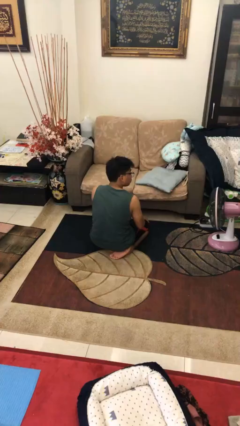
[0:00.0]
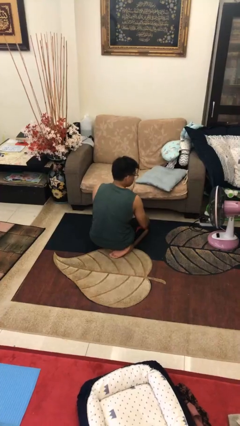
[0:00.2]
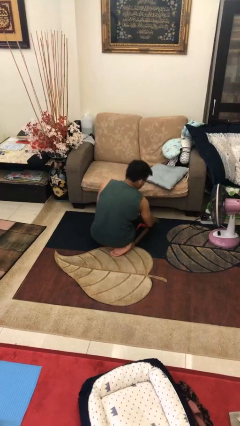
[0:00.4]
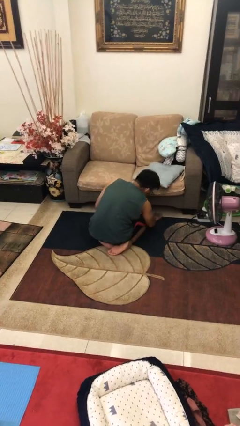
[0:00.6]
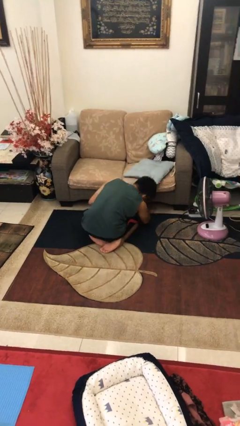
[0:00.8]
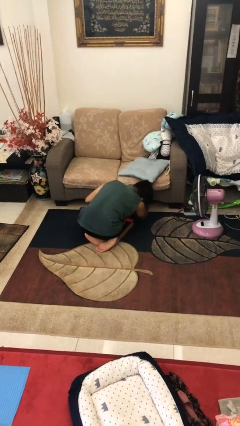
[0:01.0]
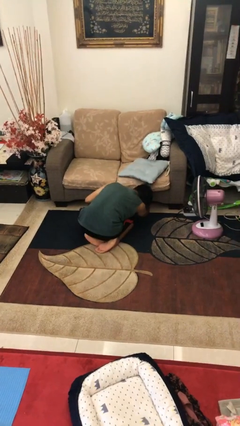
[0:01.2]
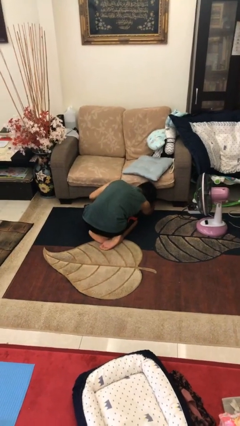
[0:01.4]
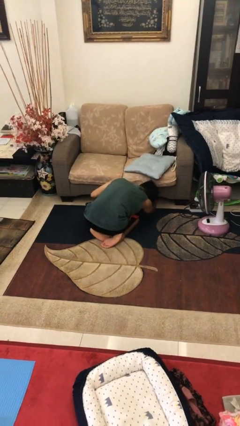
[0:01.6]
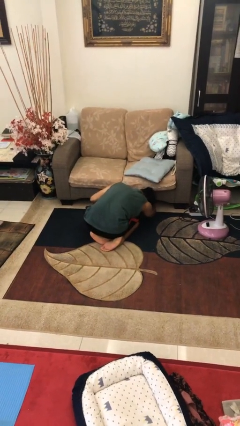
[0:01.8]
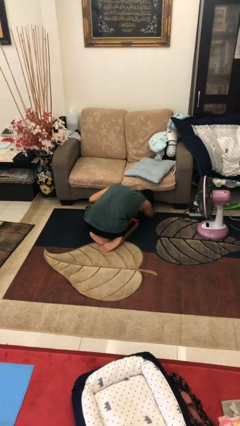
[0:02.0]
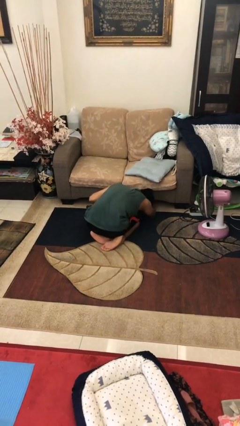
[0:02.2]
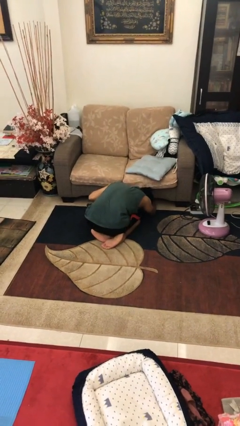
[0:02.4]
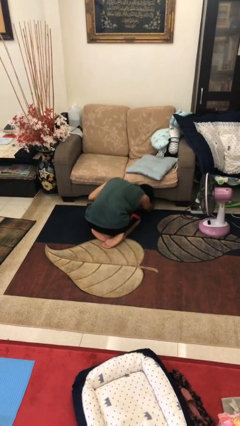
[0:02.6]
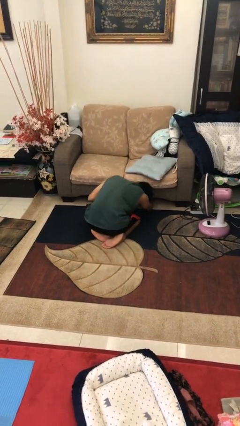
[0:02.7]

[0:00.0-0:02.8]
person searches under couch

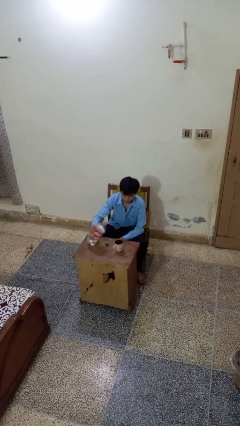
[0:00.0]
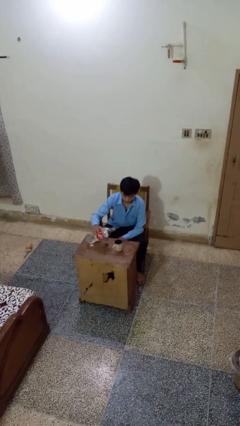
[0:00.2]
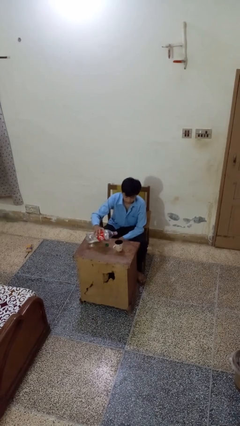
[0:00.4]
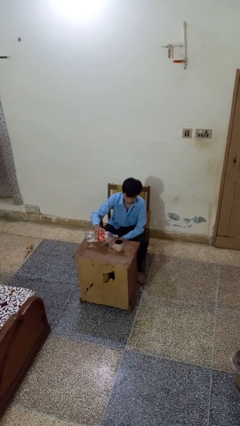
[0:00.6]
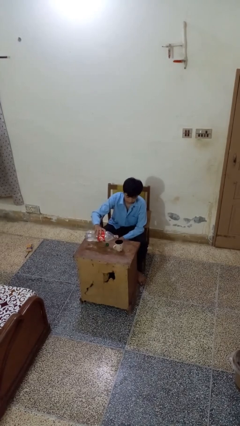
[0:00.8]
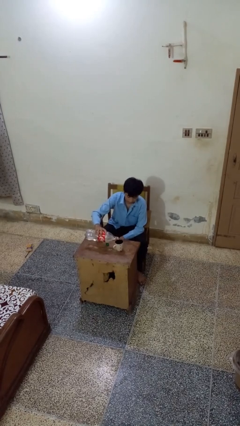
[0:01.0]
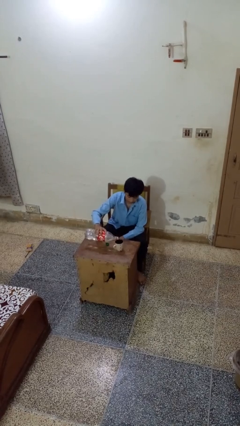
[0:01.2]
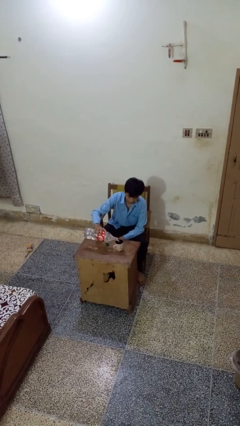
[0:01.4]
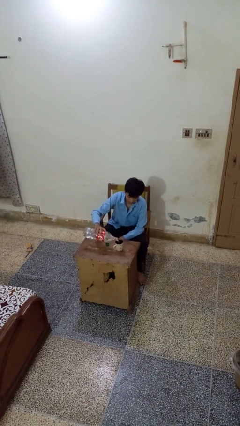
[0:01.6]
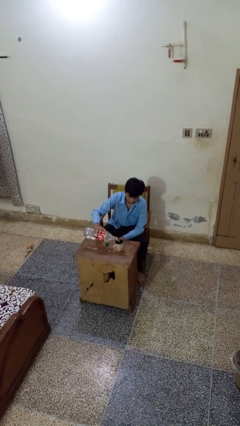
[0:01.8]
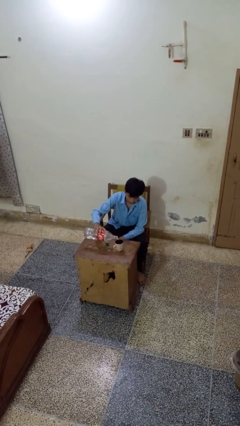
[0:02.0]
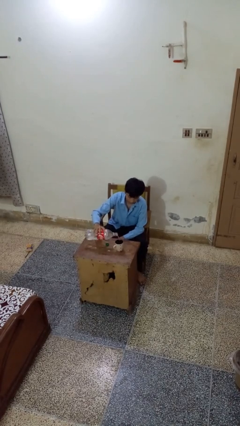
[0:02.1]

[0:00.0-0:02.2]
person pours liquid into cup

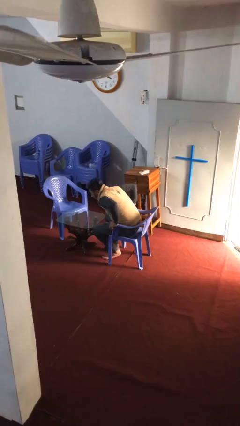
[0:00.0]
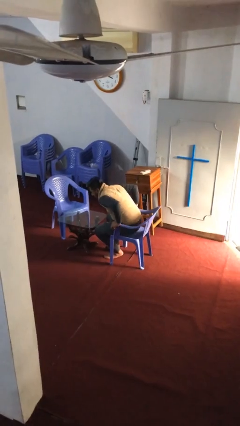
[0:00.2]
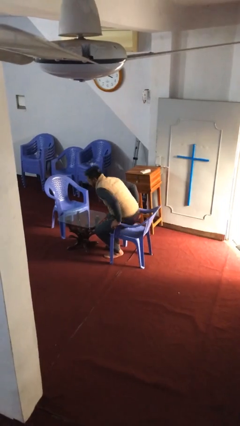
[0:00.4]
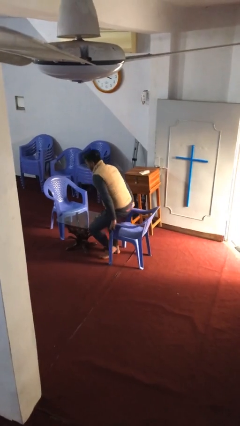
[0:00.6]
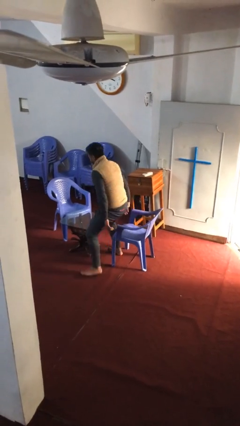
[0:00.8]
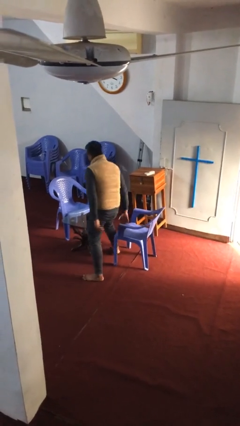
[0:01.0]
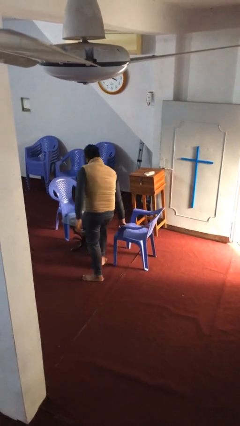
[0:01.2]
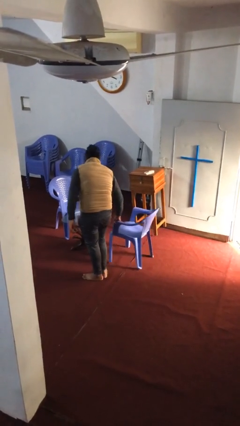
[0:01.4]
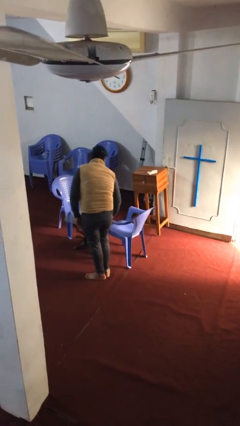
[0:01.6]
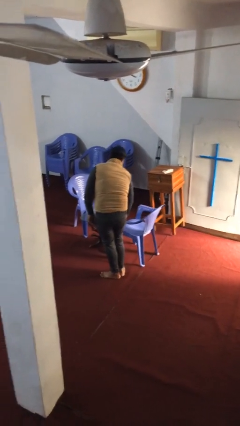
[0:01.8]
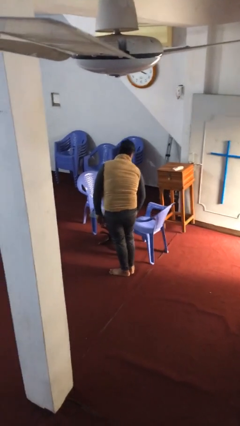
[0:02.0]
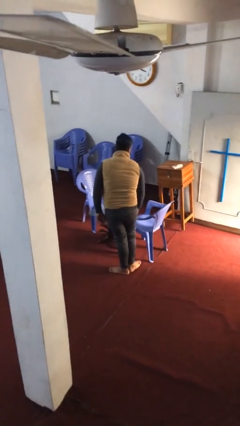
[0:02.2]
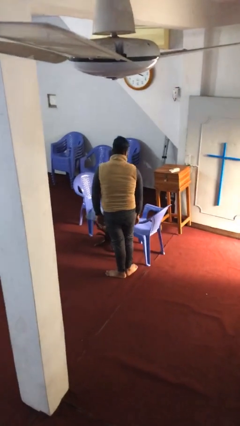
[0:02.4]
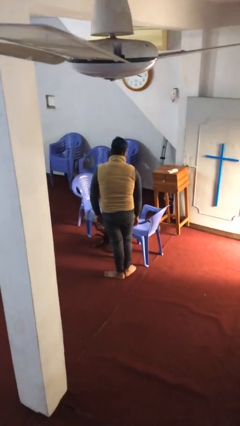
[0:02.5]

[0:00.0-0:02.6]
person stands up

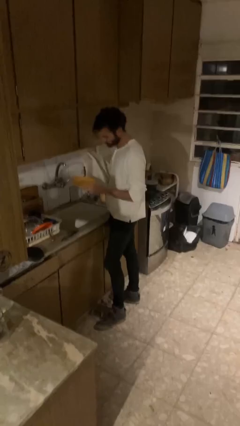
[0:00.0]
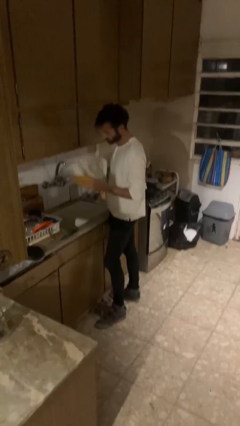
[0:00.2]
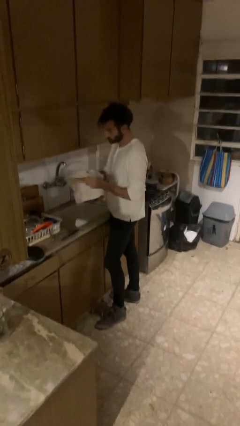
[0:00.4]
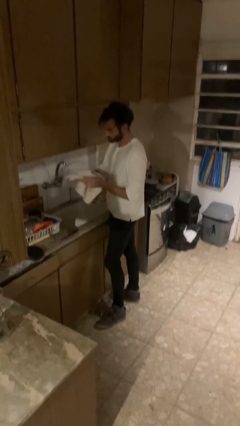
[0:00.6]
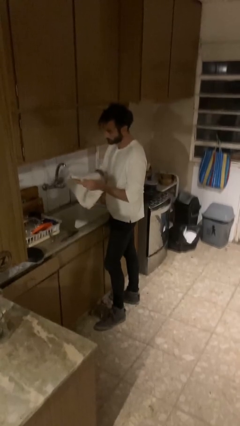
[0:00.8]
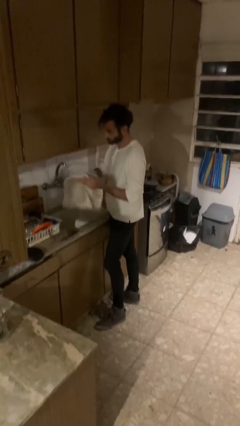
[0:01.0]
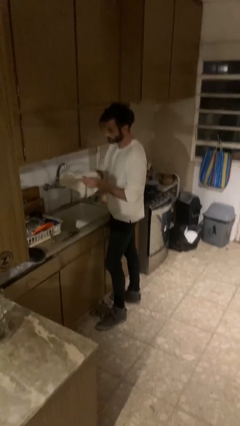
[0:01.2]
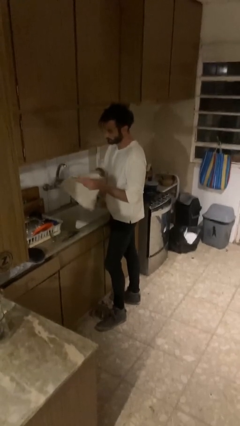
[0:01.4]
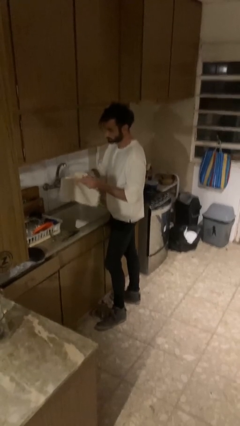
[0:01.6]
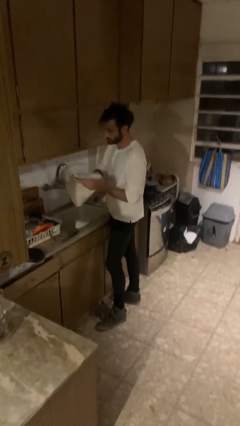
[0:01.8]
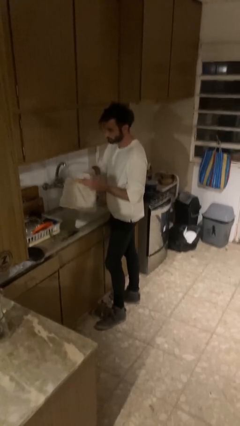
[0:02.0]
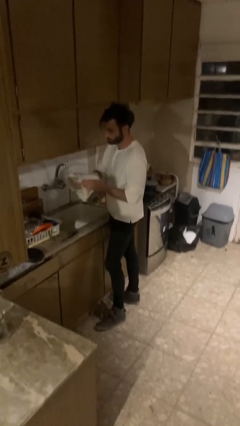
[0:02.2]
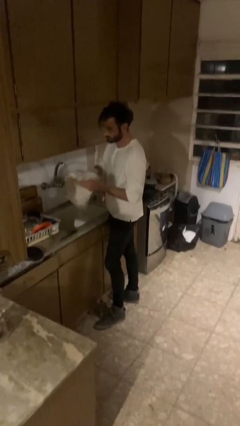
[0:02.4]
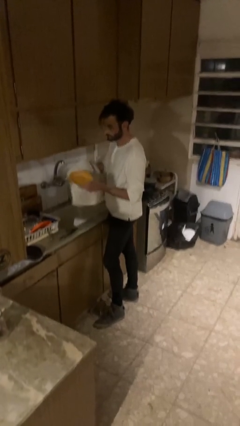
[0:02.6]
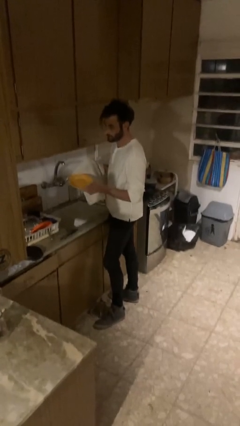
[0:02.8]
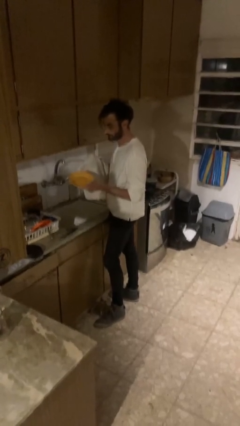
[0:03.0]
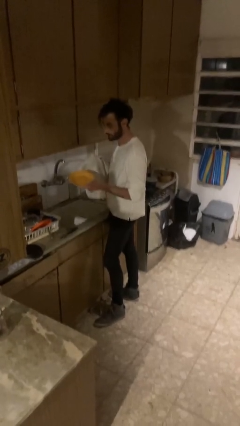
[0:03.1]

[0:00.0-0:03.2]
person dries dish

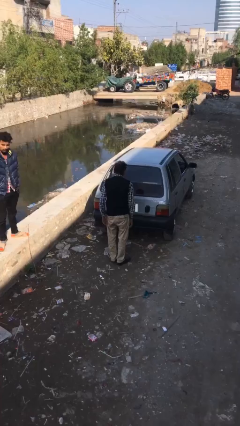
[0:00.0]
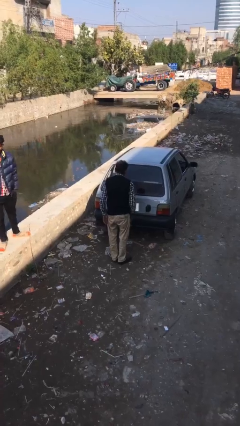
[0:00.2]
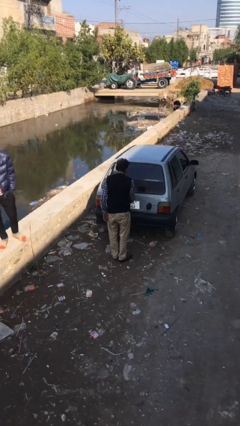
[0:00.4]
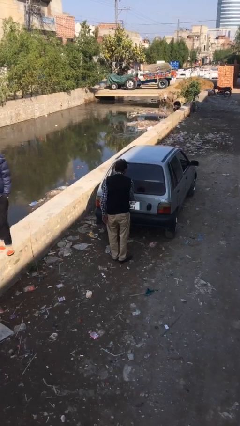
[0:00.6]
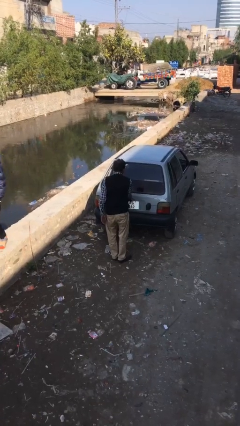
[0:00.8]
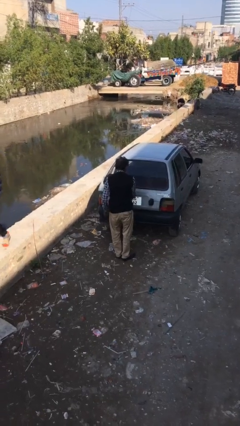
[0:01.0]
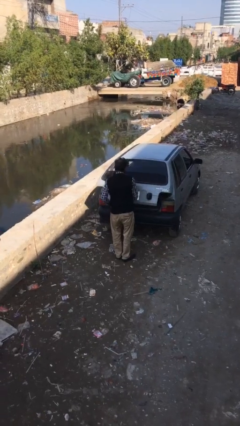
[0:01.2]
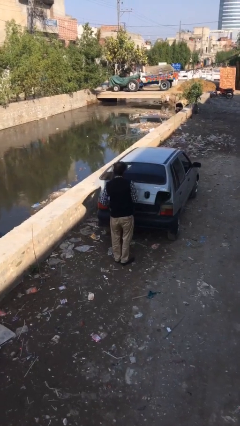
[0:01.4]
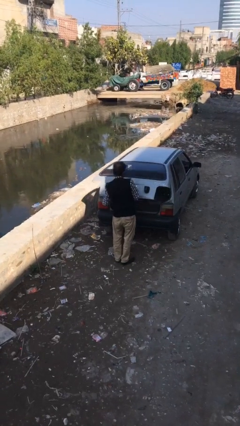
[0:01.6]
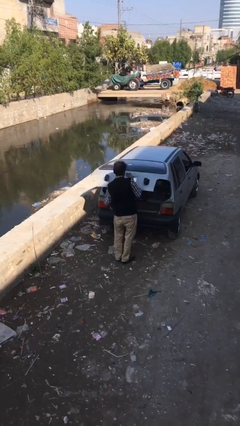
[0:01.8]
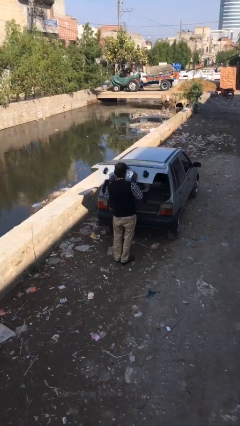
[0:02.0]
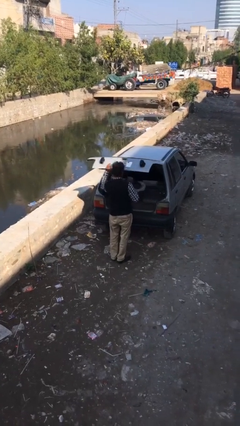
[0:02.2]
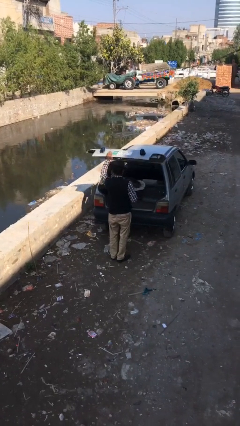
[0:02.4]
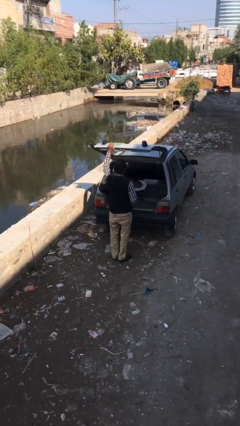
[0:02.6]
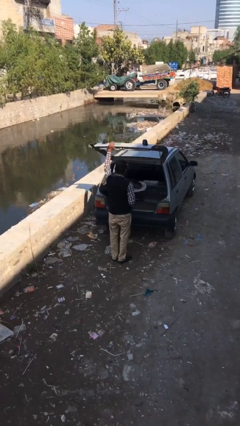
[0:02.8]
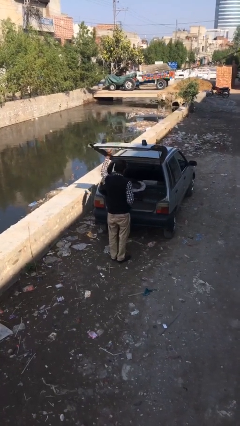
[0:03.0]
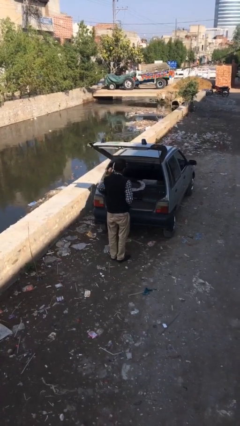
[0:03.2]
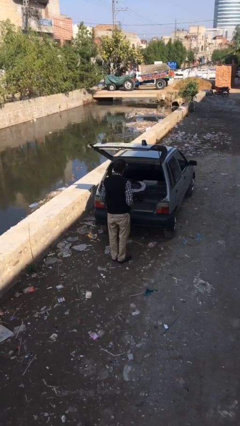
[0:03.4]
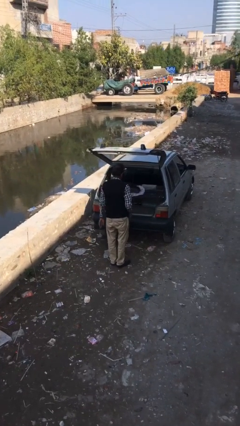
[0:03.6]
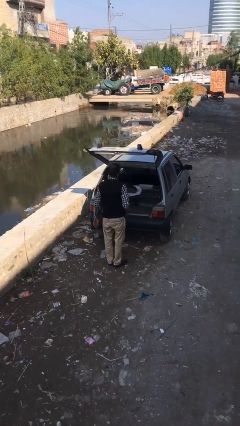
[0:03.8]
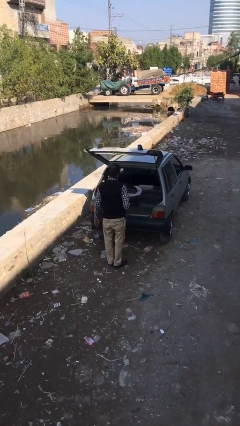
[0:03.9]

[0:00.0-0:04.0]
person opens car trunk

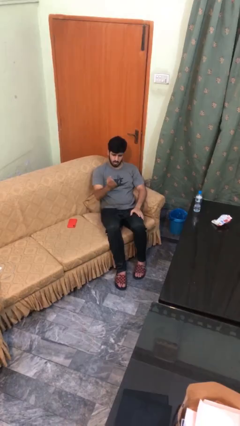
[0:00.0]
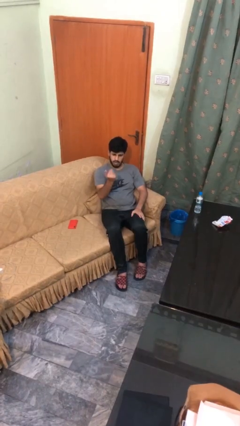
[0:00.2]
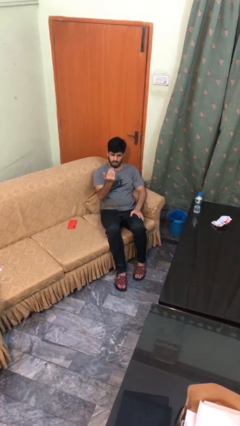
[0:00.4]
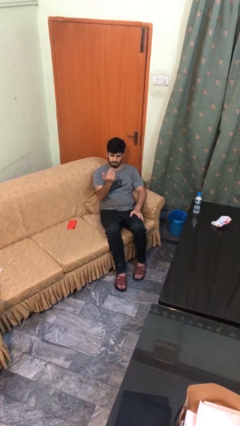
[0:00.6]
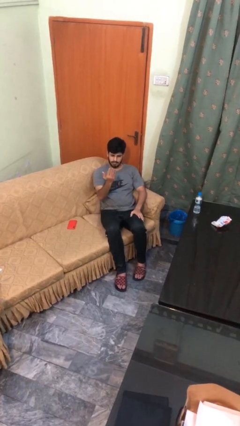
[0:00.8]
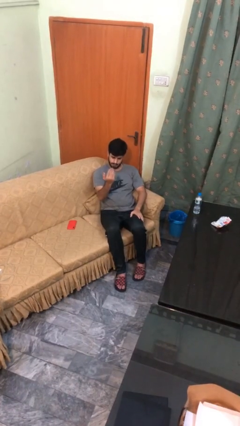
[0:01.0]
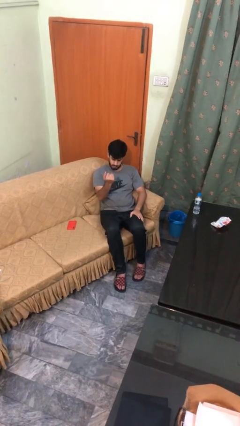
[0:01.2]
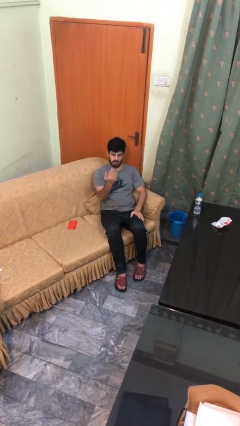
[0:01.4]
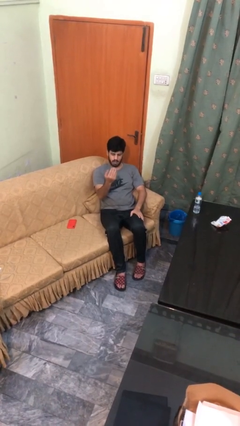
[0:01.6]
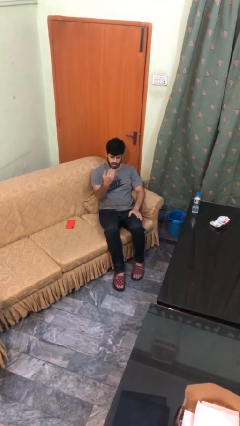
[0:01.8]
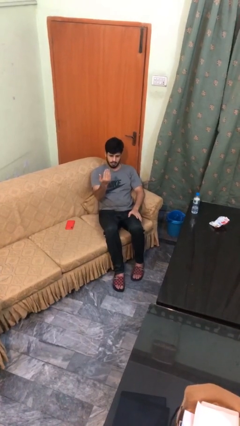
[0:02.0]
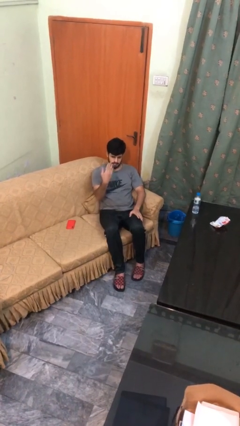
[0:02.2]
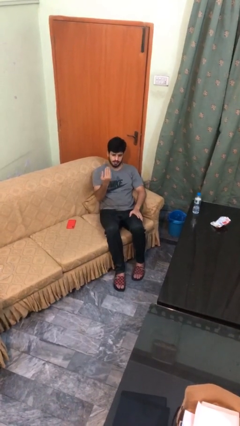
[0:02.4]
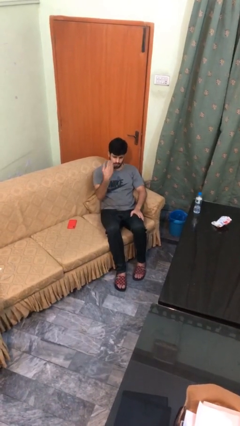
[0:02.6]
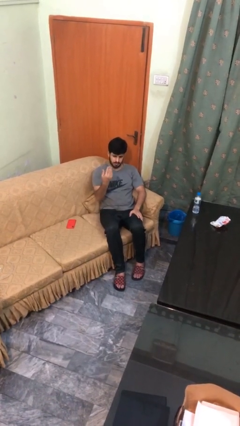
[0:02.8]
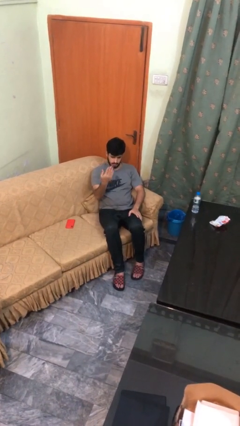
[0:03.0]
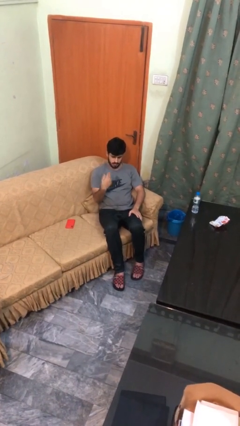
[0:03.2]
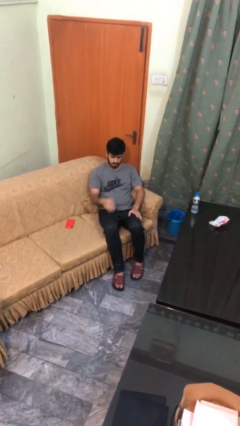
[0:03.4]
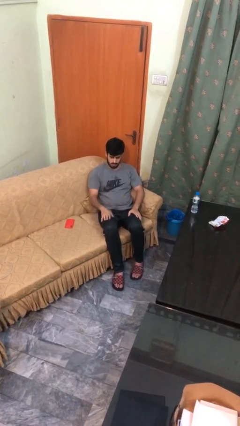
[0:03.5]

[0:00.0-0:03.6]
person gestures come here
